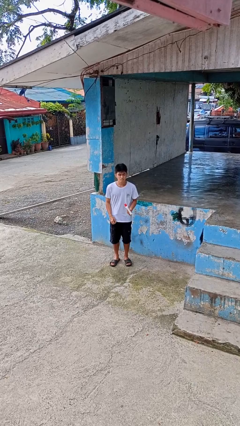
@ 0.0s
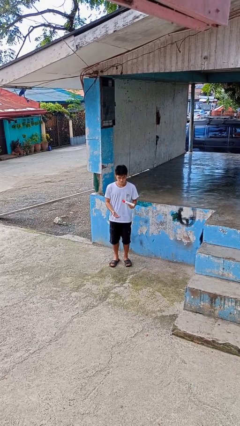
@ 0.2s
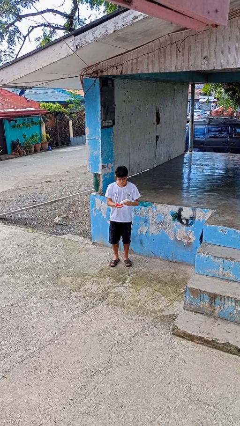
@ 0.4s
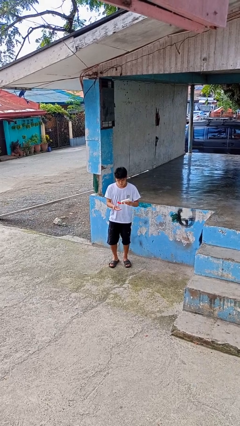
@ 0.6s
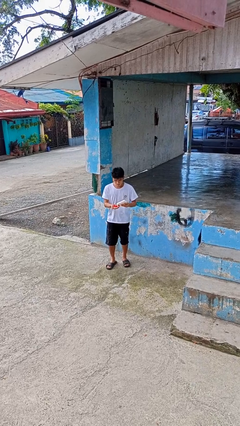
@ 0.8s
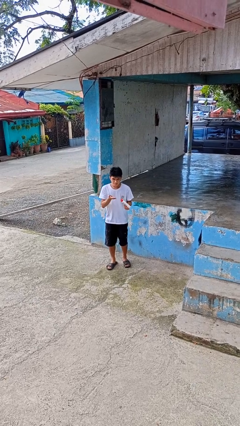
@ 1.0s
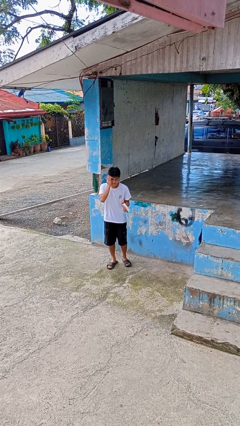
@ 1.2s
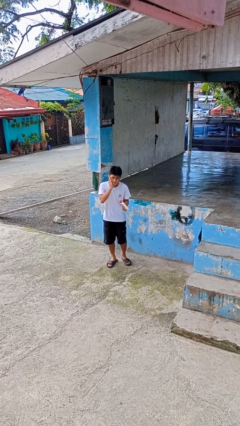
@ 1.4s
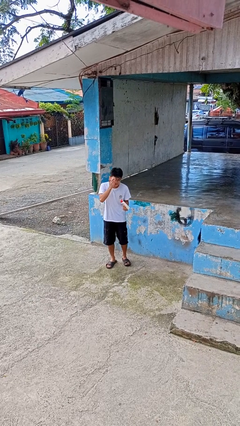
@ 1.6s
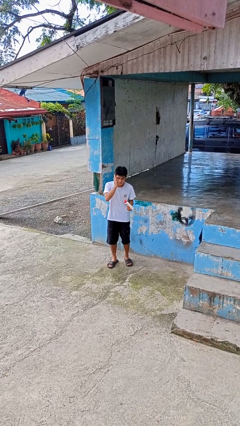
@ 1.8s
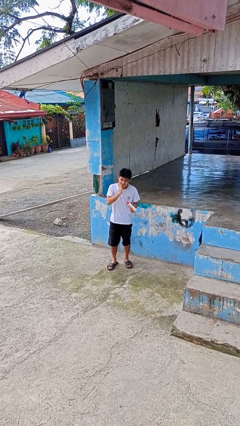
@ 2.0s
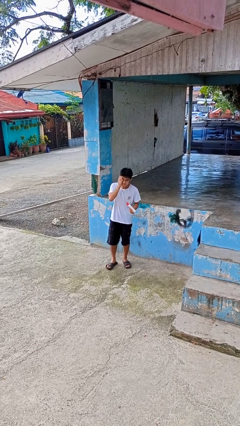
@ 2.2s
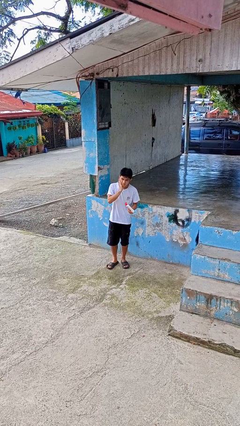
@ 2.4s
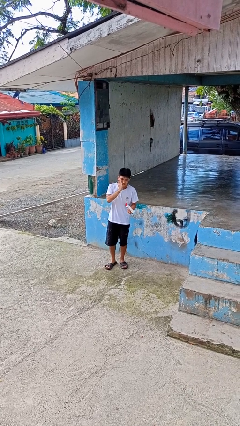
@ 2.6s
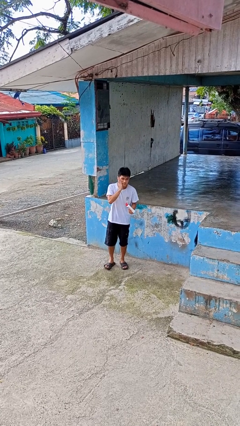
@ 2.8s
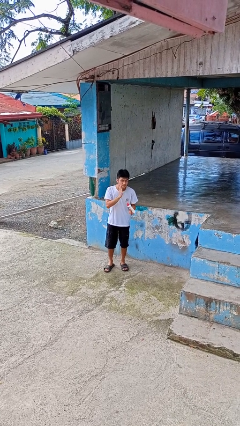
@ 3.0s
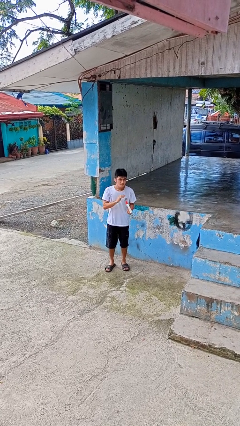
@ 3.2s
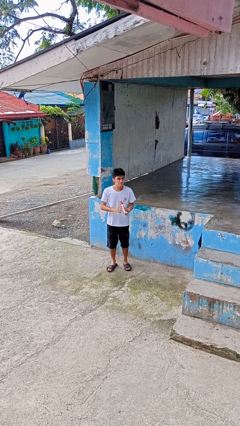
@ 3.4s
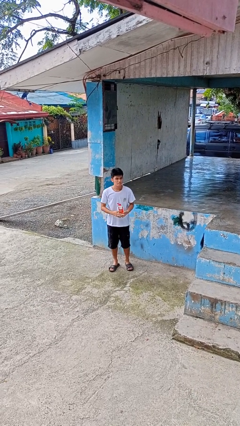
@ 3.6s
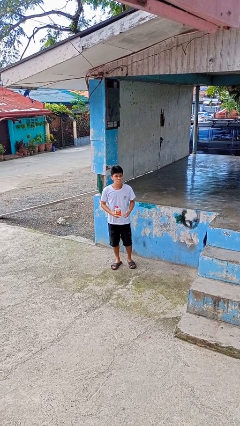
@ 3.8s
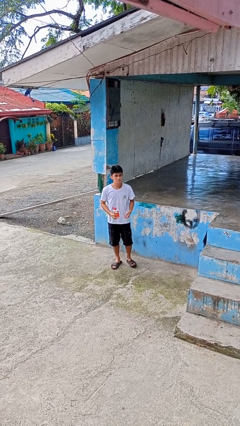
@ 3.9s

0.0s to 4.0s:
person applies facial moisturizer

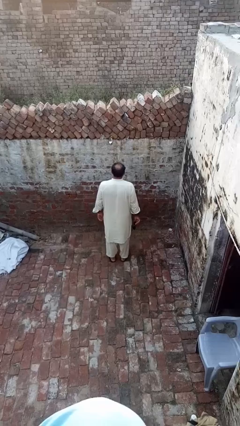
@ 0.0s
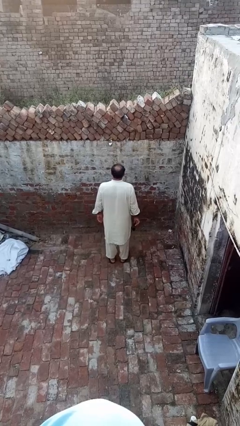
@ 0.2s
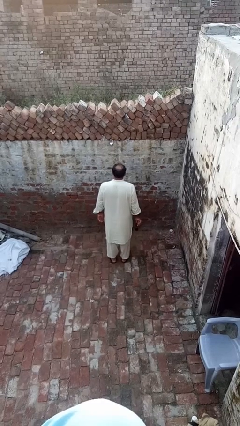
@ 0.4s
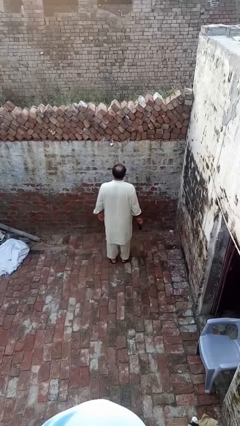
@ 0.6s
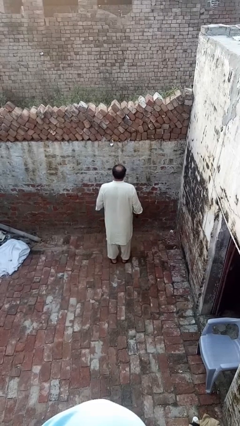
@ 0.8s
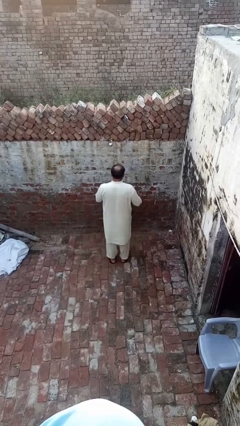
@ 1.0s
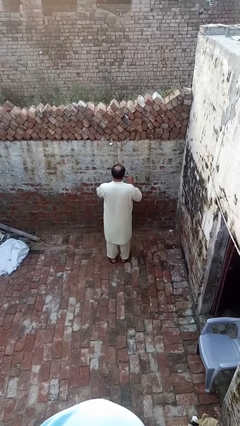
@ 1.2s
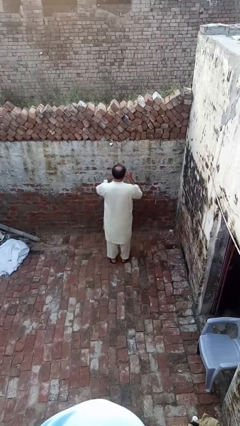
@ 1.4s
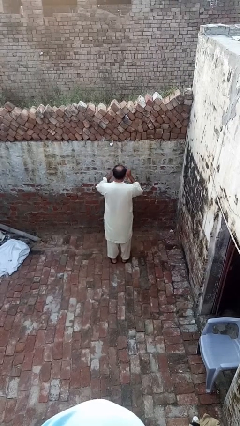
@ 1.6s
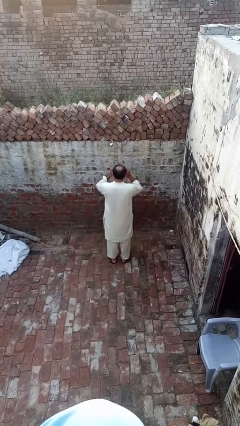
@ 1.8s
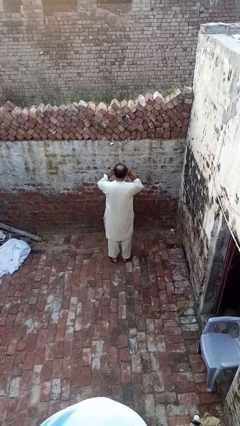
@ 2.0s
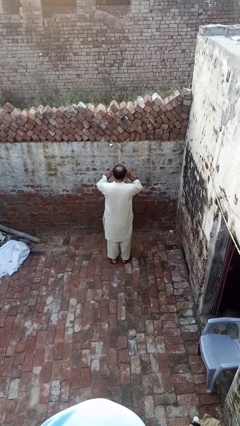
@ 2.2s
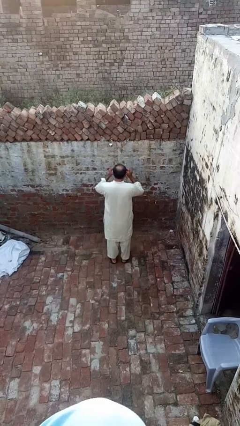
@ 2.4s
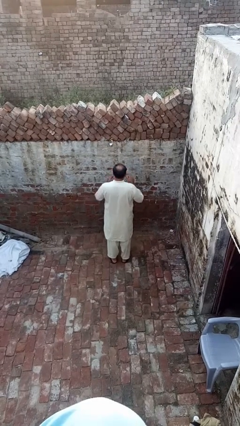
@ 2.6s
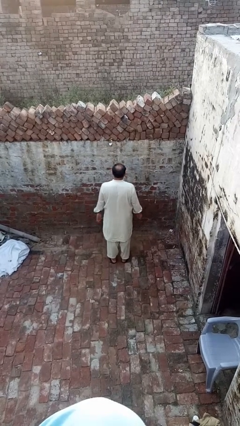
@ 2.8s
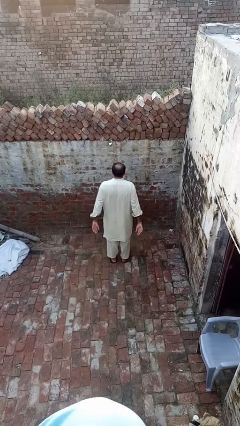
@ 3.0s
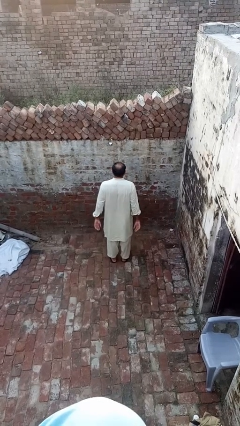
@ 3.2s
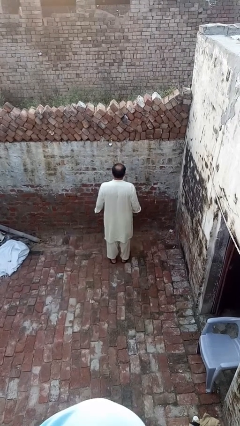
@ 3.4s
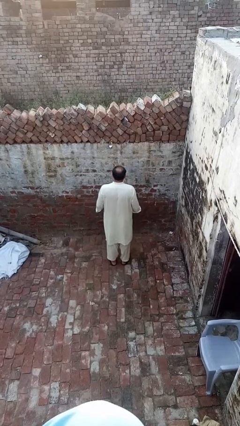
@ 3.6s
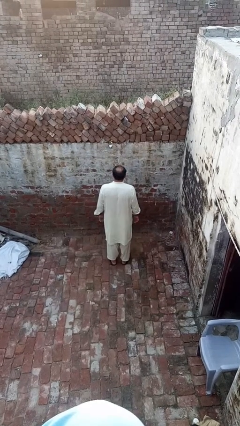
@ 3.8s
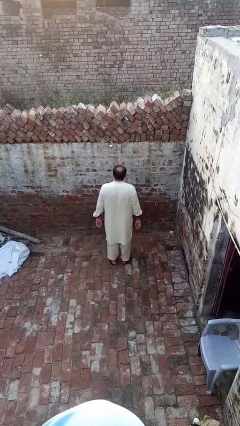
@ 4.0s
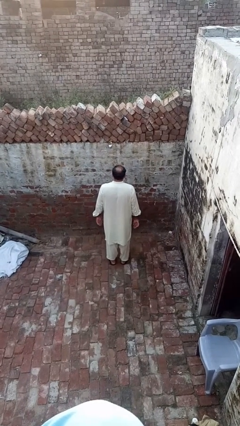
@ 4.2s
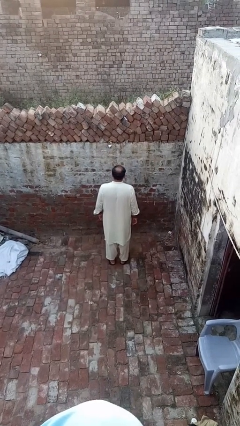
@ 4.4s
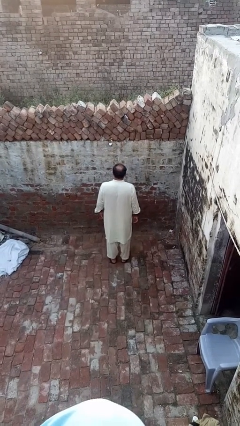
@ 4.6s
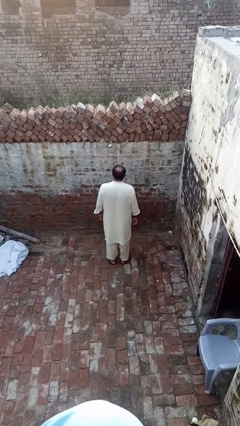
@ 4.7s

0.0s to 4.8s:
person puts on sunglasses

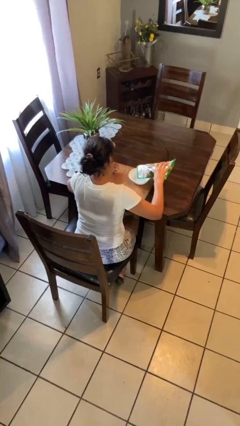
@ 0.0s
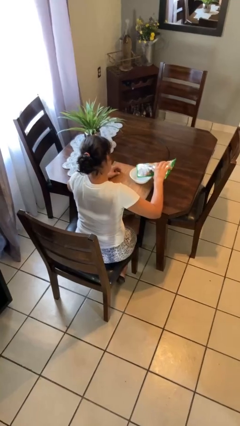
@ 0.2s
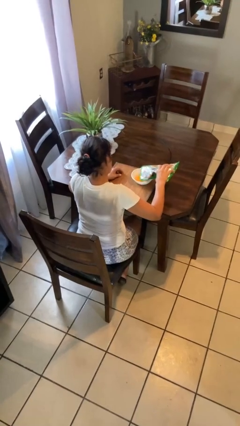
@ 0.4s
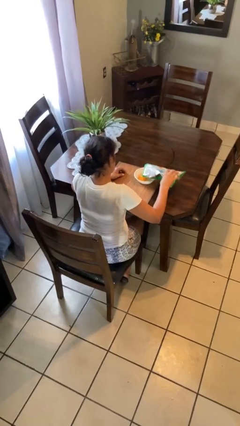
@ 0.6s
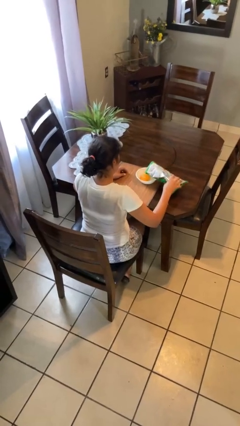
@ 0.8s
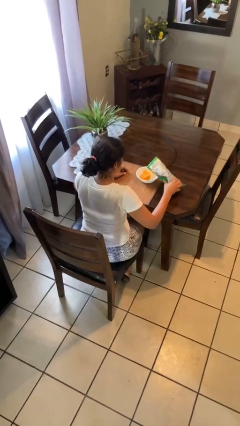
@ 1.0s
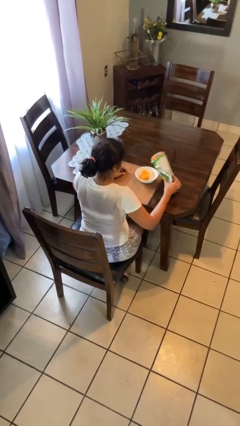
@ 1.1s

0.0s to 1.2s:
person pours into bowl

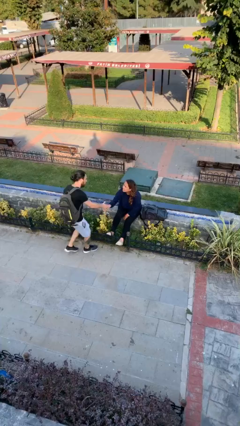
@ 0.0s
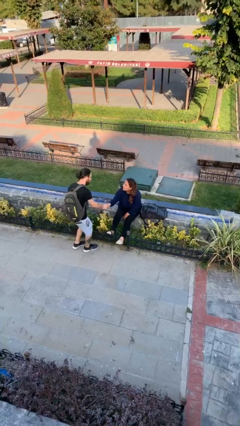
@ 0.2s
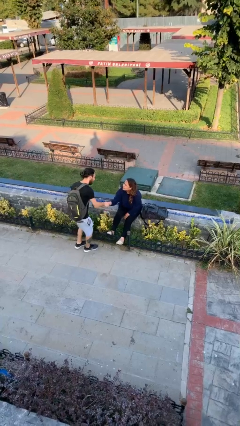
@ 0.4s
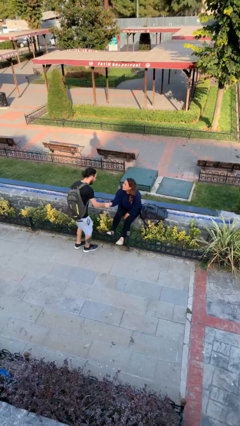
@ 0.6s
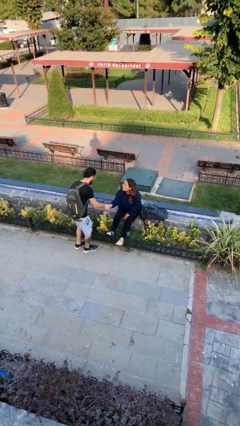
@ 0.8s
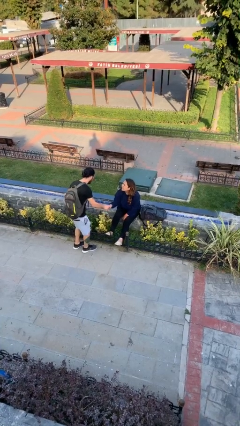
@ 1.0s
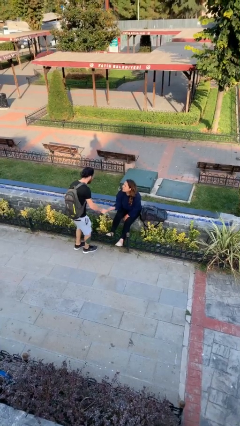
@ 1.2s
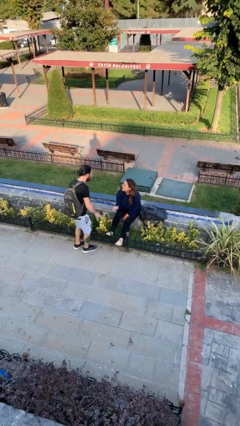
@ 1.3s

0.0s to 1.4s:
person shakes hand

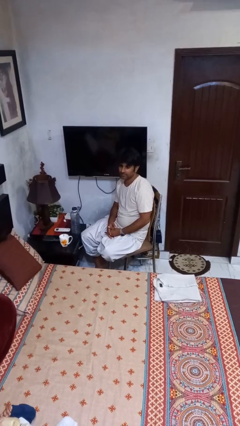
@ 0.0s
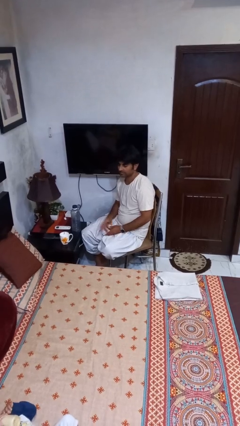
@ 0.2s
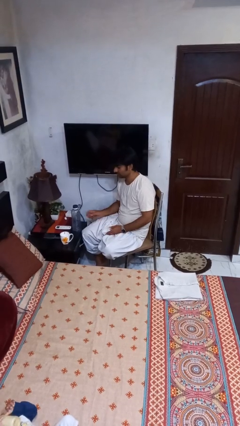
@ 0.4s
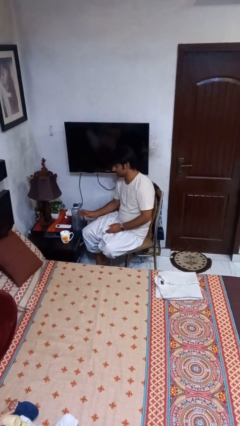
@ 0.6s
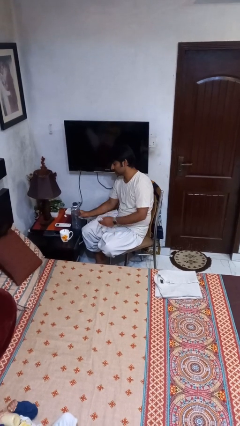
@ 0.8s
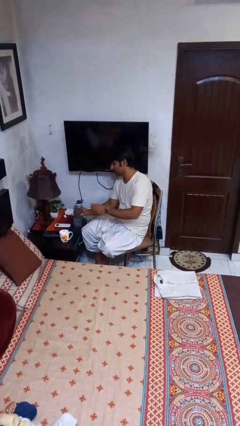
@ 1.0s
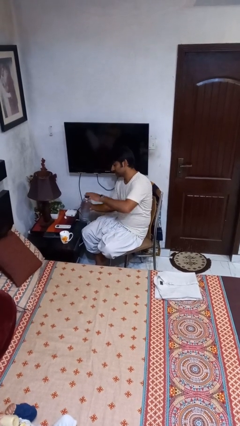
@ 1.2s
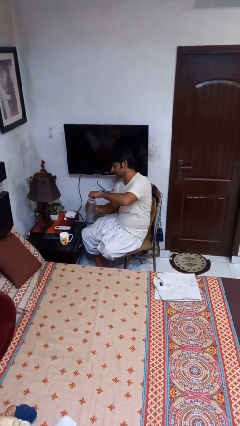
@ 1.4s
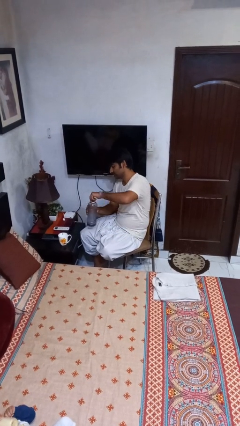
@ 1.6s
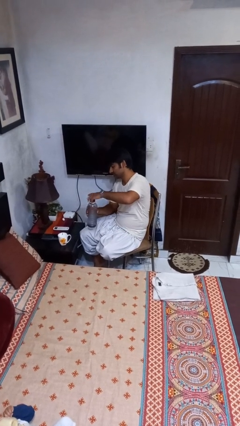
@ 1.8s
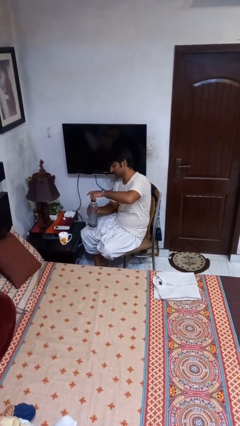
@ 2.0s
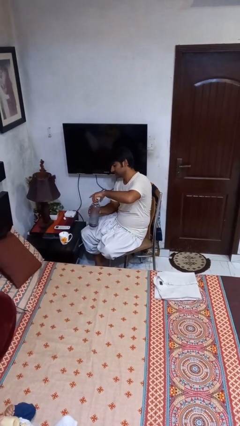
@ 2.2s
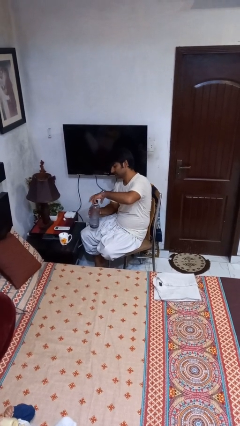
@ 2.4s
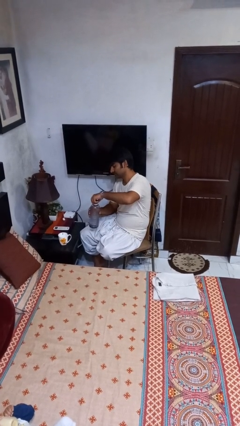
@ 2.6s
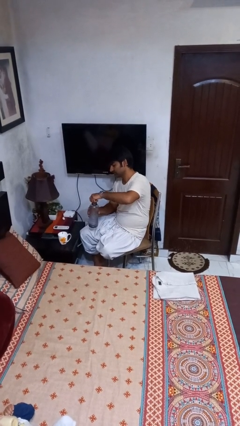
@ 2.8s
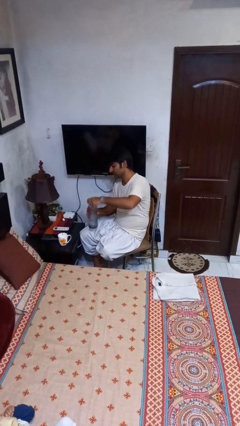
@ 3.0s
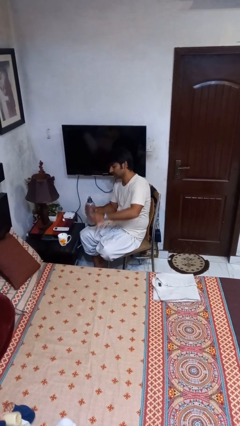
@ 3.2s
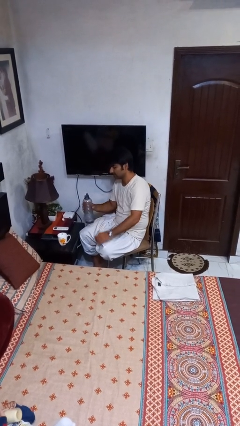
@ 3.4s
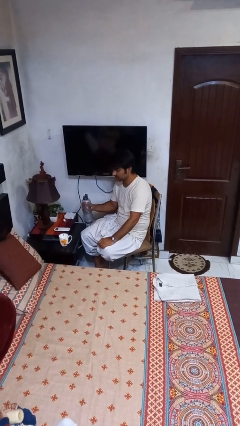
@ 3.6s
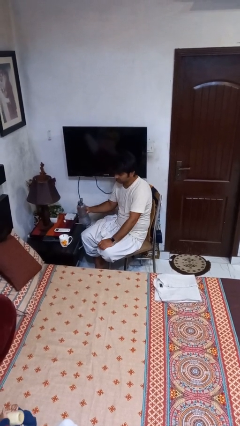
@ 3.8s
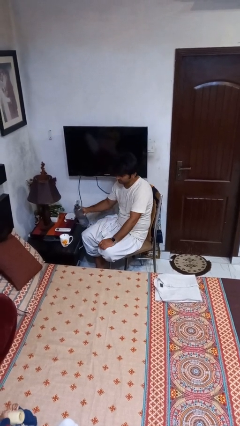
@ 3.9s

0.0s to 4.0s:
person unscrews lid from bottle

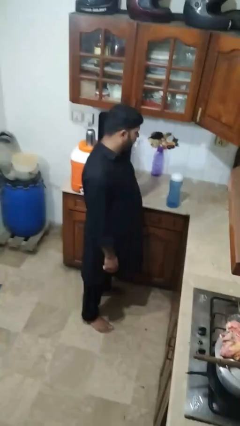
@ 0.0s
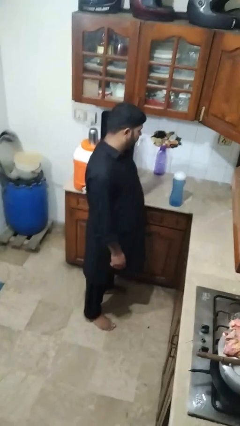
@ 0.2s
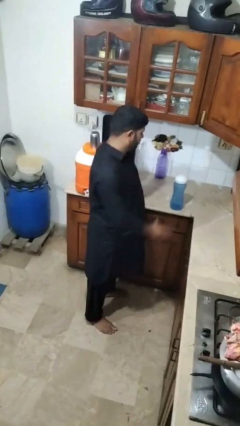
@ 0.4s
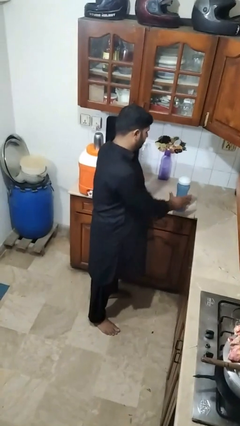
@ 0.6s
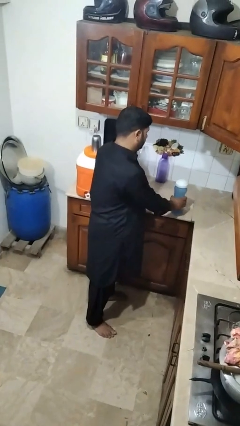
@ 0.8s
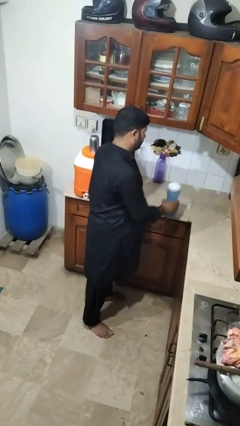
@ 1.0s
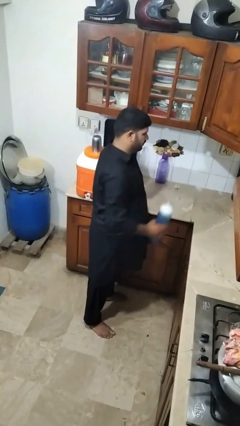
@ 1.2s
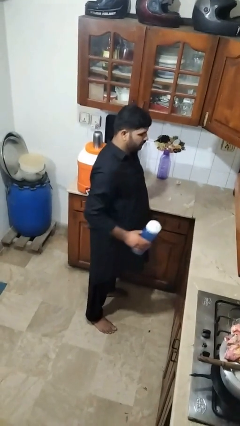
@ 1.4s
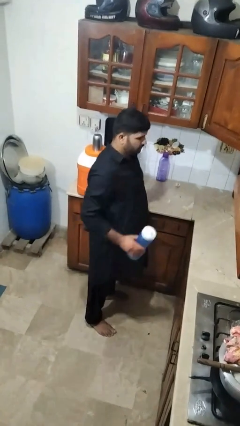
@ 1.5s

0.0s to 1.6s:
person picks up object from countertop

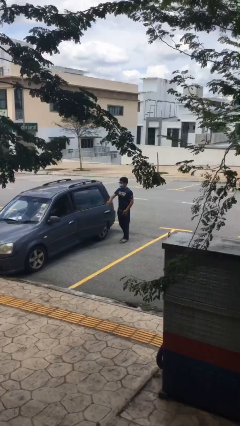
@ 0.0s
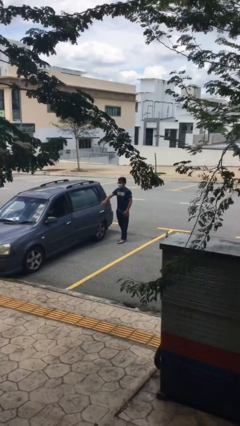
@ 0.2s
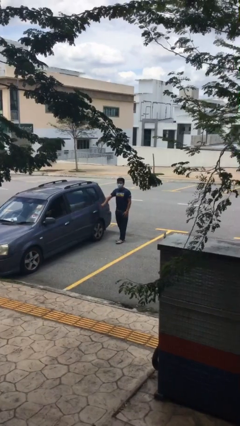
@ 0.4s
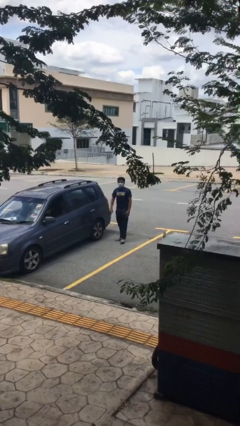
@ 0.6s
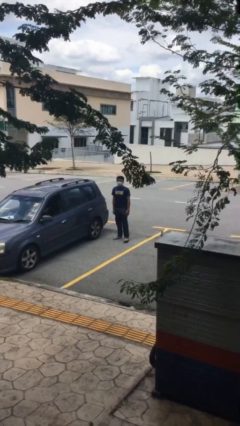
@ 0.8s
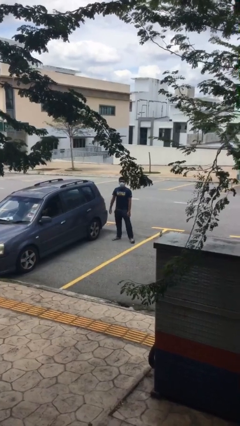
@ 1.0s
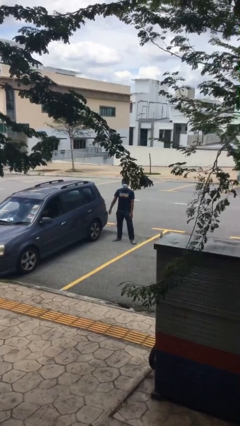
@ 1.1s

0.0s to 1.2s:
person closes car door
